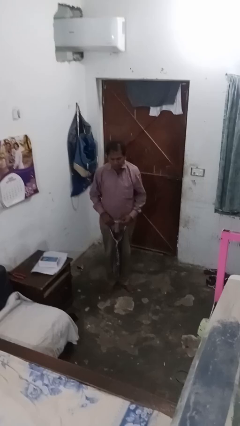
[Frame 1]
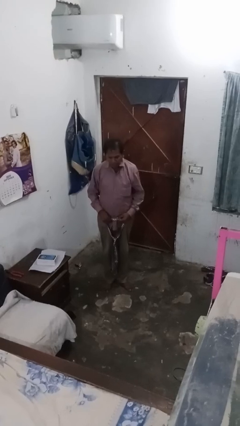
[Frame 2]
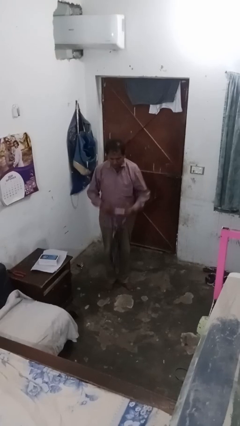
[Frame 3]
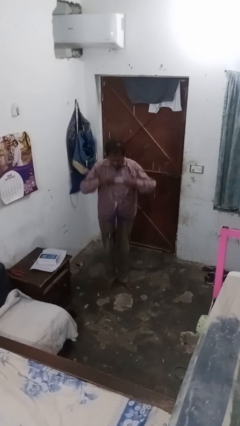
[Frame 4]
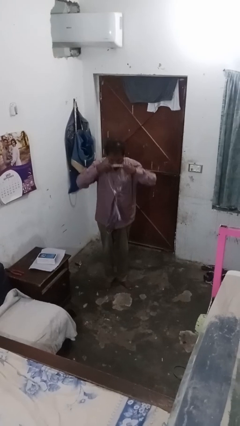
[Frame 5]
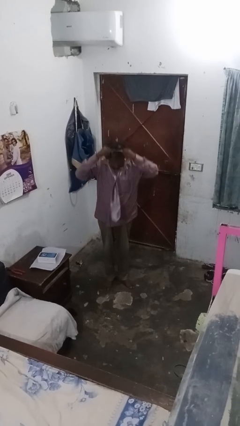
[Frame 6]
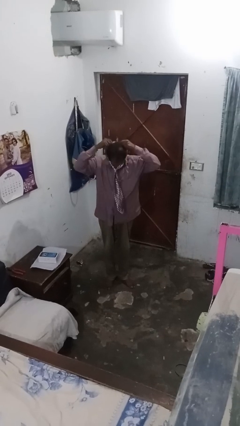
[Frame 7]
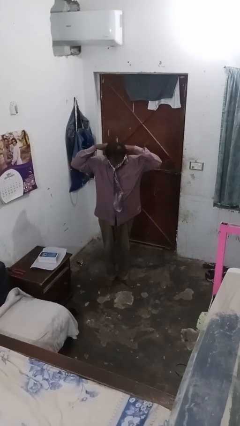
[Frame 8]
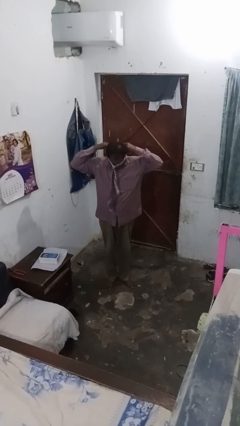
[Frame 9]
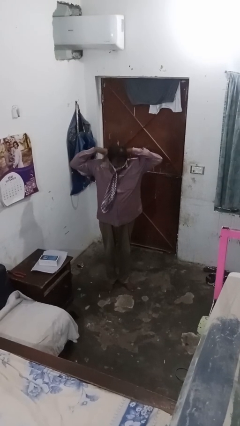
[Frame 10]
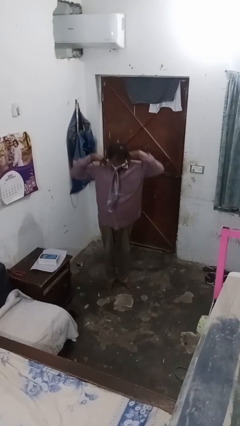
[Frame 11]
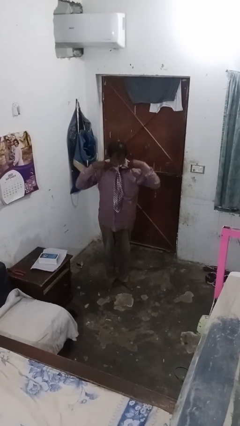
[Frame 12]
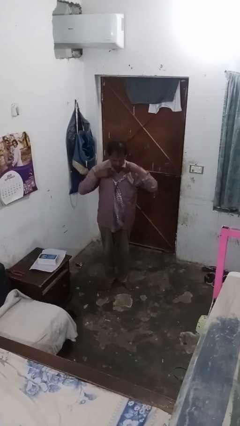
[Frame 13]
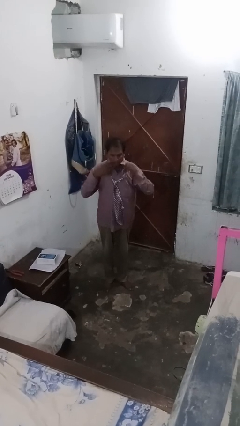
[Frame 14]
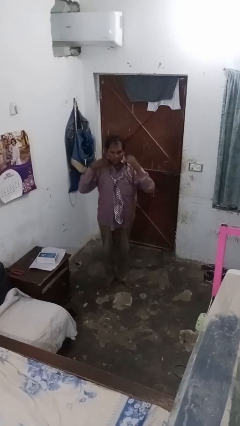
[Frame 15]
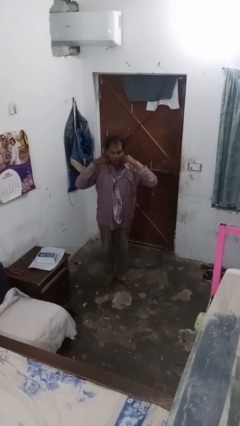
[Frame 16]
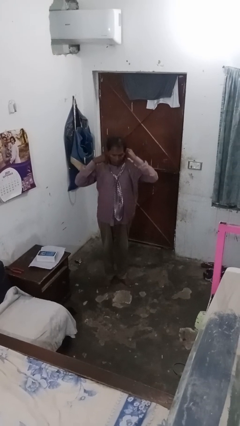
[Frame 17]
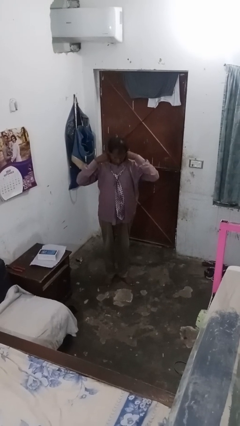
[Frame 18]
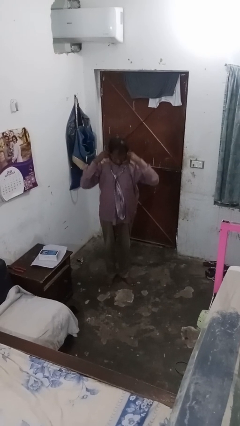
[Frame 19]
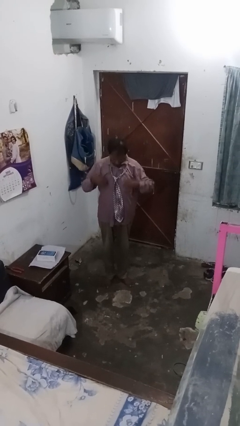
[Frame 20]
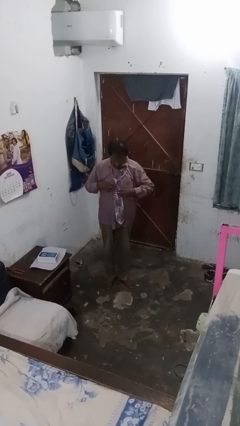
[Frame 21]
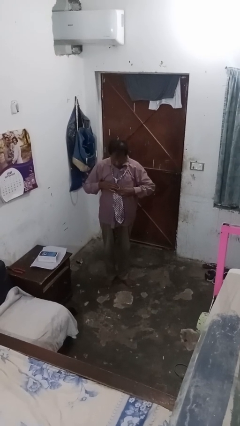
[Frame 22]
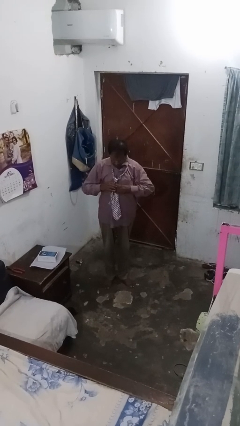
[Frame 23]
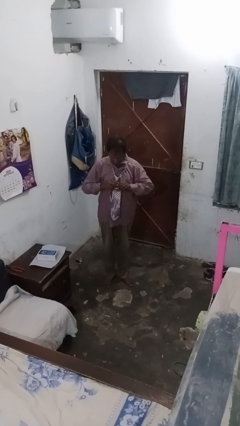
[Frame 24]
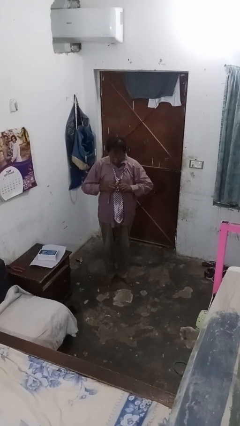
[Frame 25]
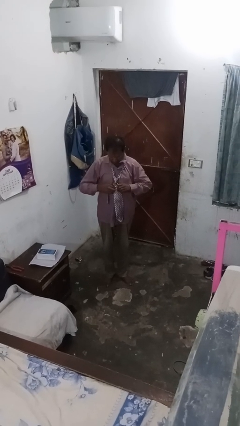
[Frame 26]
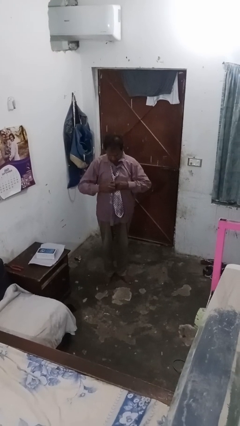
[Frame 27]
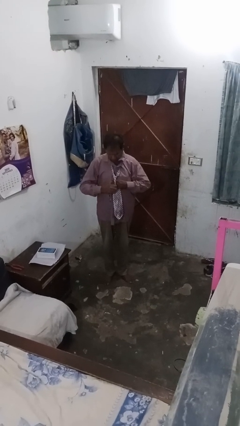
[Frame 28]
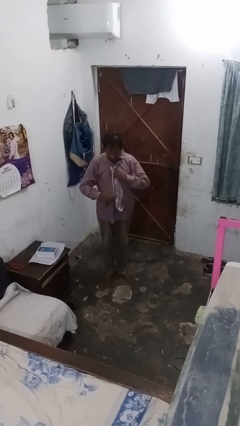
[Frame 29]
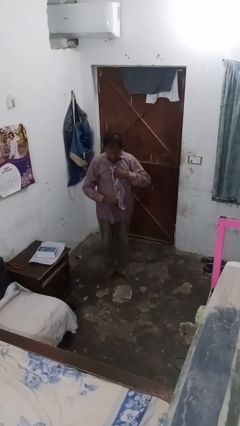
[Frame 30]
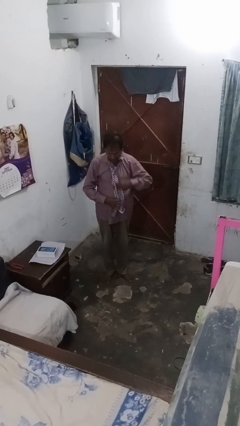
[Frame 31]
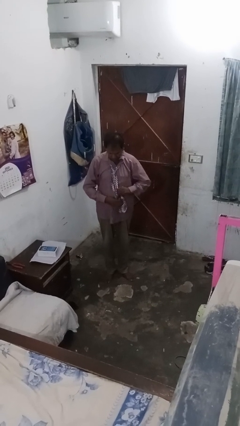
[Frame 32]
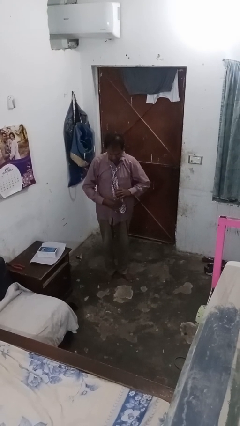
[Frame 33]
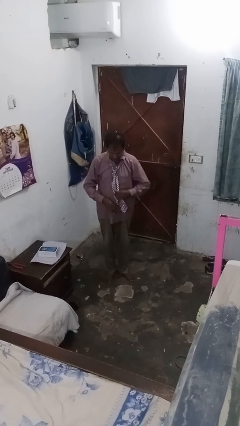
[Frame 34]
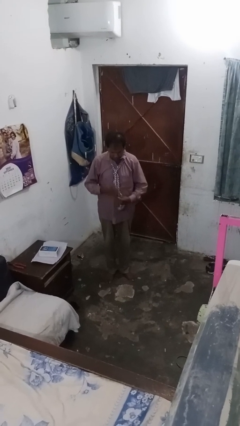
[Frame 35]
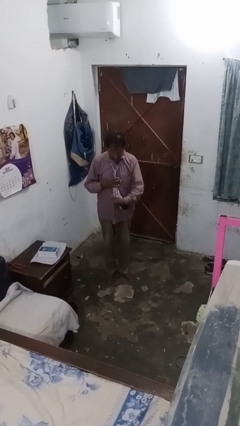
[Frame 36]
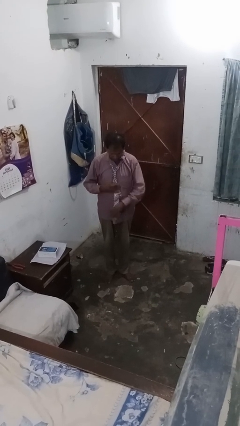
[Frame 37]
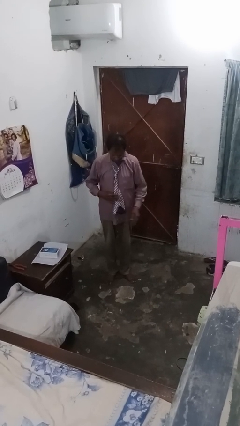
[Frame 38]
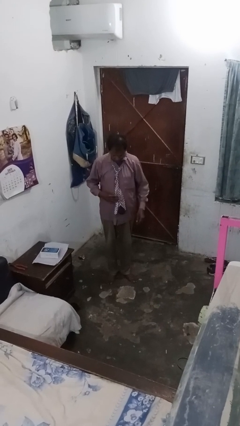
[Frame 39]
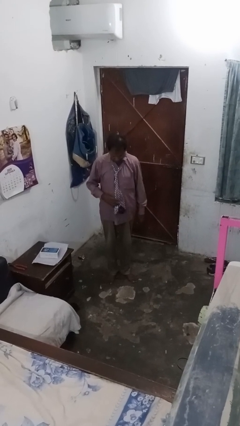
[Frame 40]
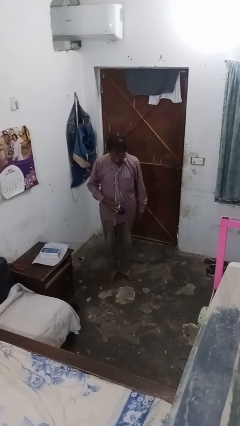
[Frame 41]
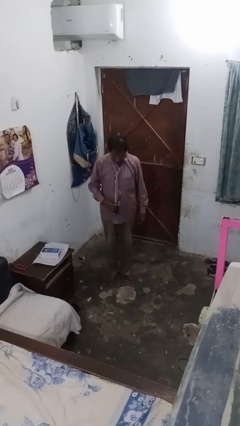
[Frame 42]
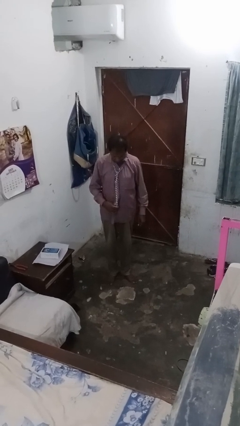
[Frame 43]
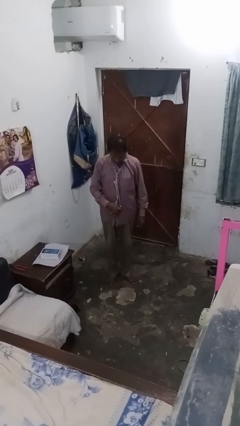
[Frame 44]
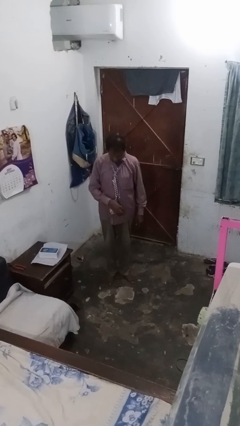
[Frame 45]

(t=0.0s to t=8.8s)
person puts on necktie

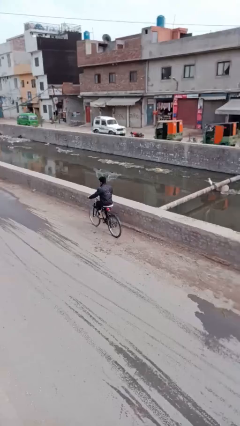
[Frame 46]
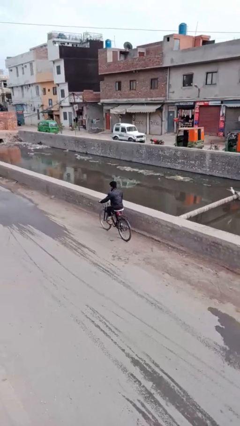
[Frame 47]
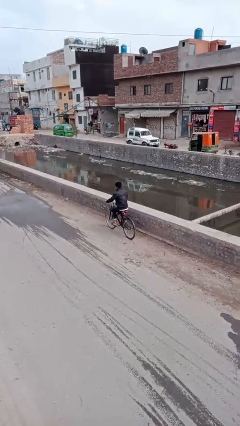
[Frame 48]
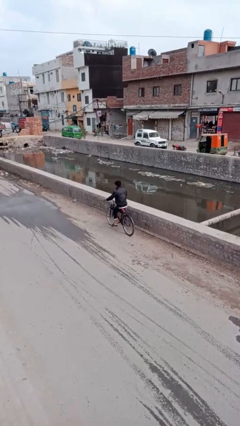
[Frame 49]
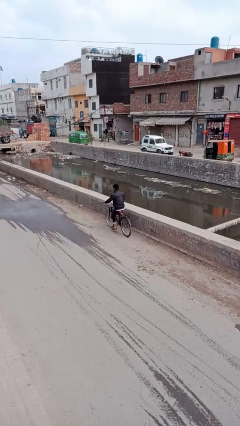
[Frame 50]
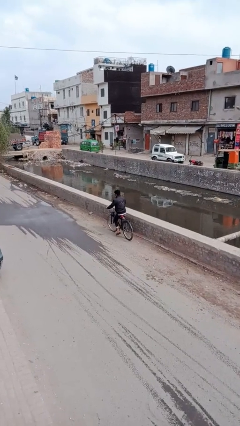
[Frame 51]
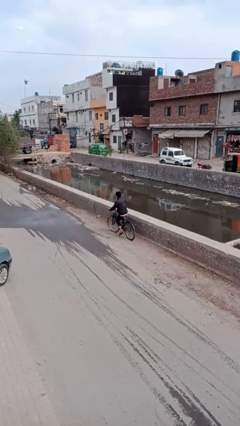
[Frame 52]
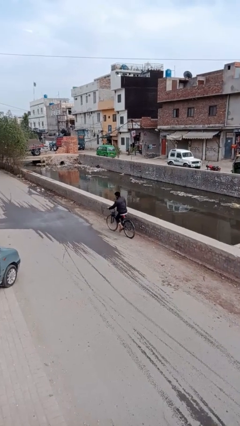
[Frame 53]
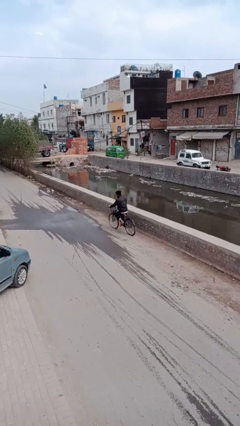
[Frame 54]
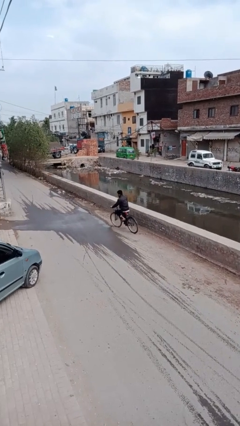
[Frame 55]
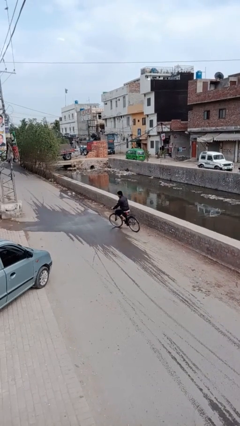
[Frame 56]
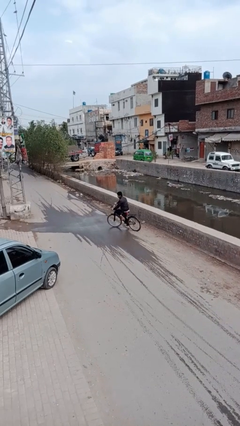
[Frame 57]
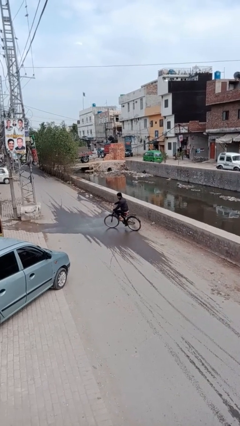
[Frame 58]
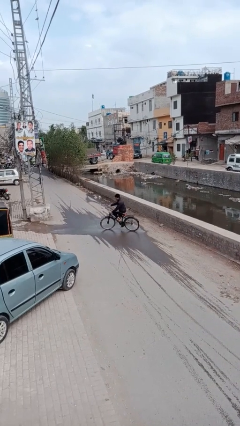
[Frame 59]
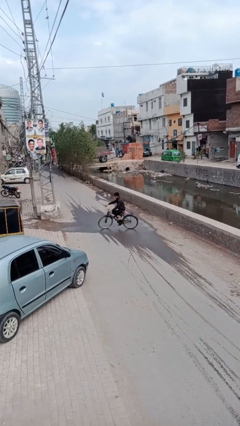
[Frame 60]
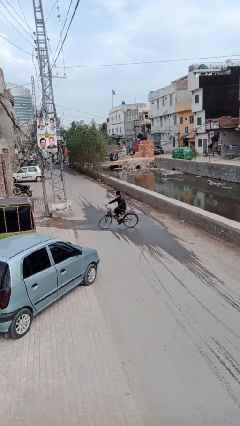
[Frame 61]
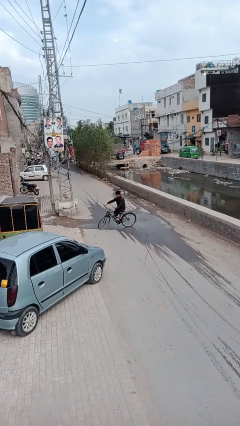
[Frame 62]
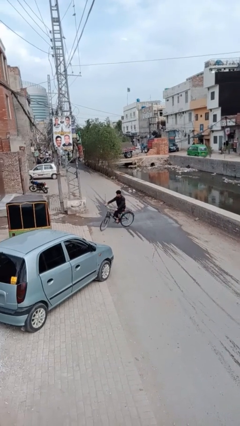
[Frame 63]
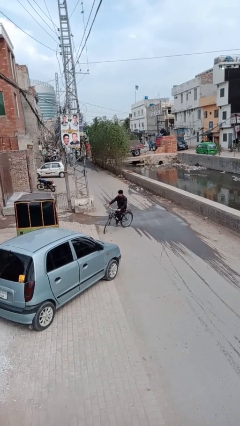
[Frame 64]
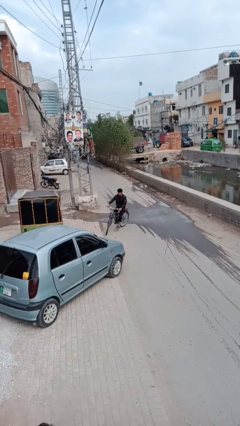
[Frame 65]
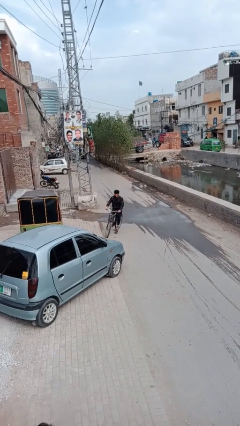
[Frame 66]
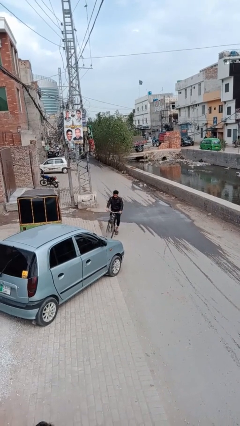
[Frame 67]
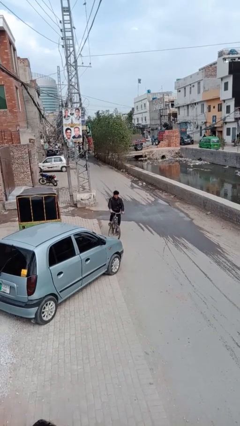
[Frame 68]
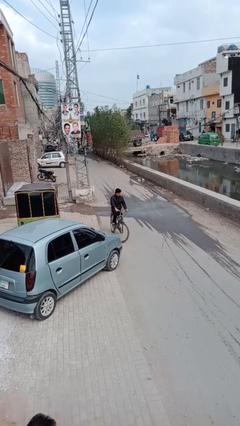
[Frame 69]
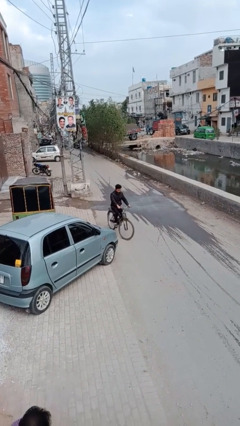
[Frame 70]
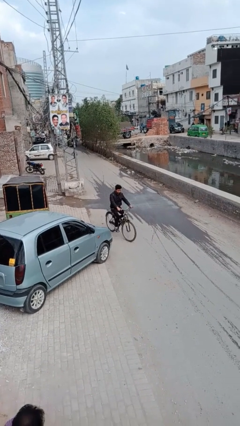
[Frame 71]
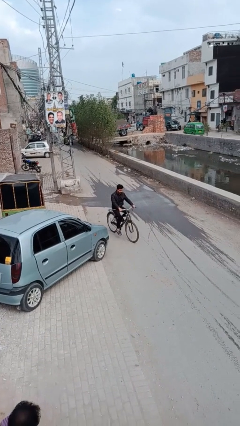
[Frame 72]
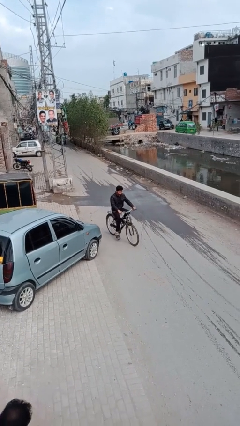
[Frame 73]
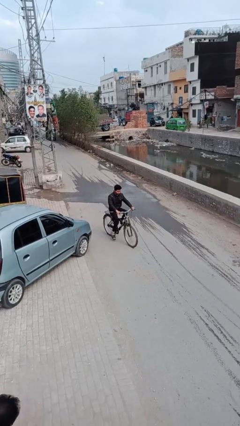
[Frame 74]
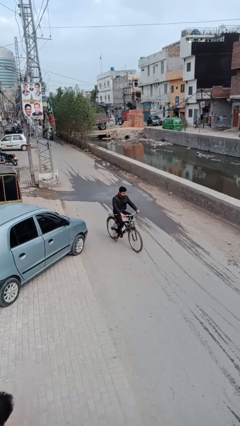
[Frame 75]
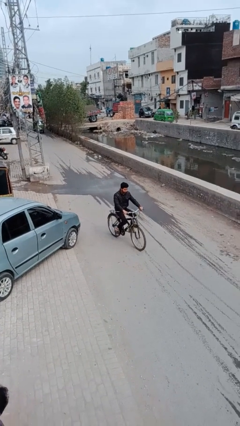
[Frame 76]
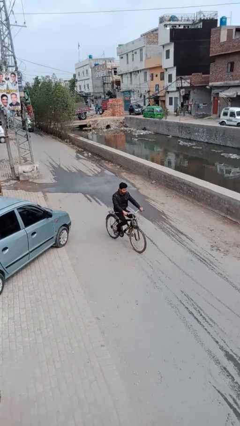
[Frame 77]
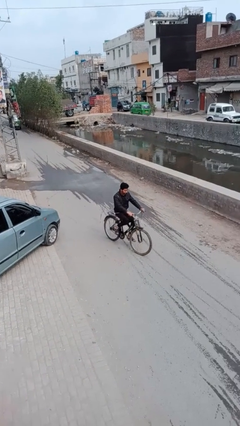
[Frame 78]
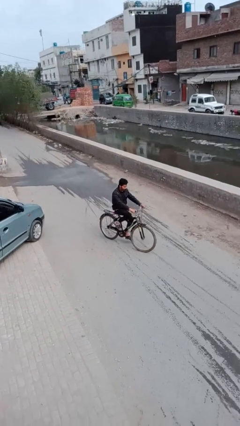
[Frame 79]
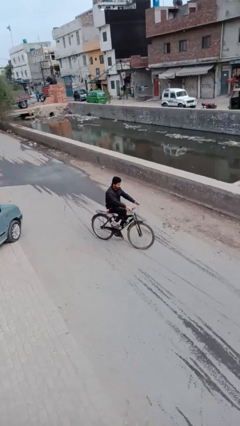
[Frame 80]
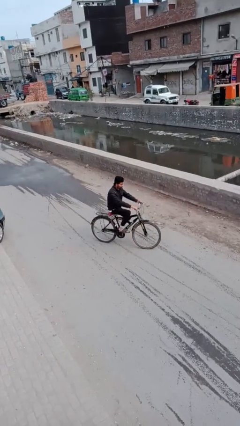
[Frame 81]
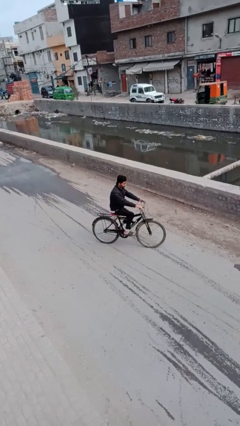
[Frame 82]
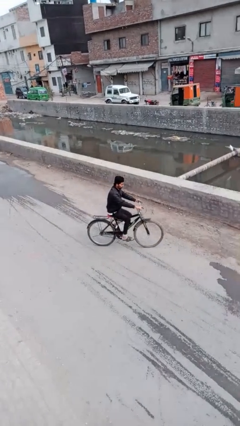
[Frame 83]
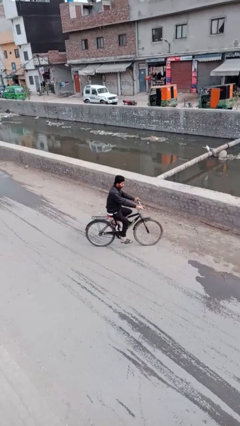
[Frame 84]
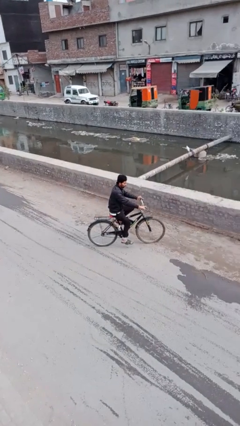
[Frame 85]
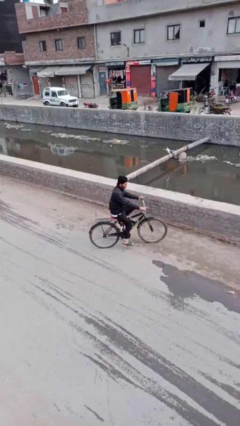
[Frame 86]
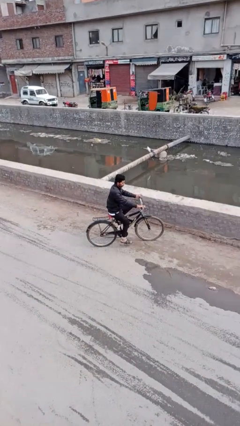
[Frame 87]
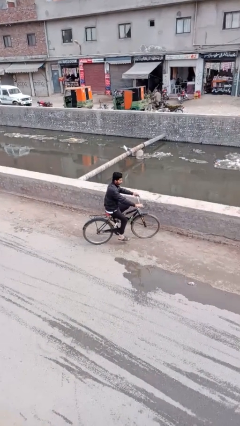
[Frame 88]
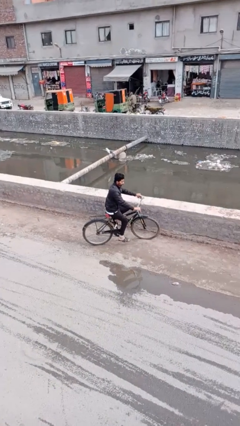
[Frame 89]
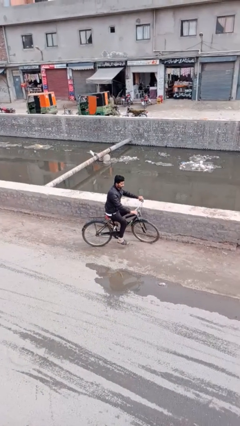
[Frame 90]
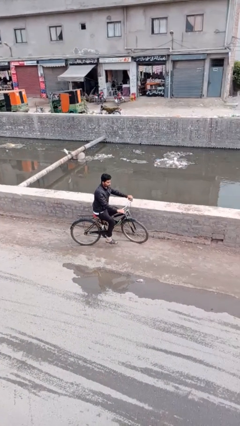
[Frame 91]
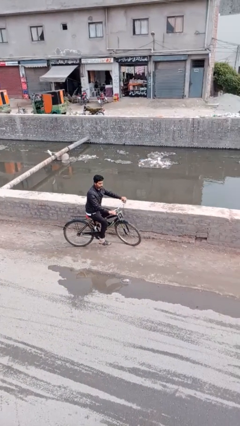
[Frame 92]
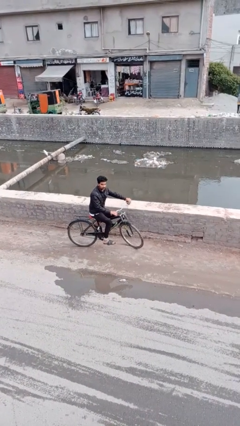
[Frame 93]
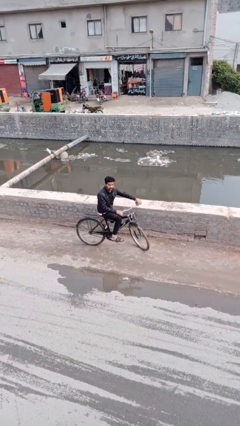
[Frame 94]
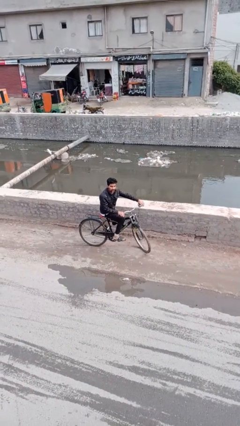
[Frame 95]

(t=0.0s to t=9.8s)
person rides bicycle
